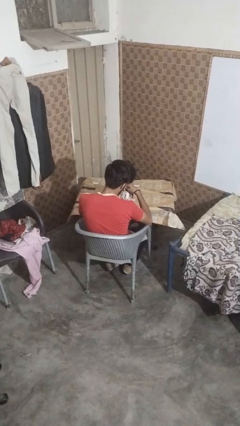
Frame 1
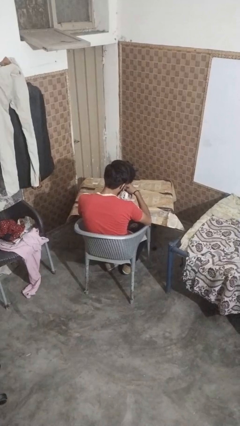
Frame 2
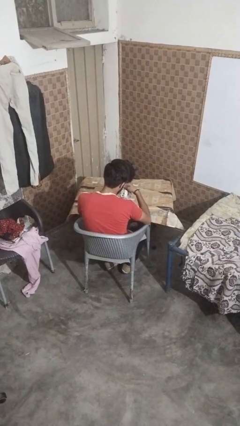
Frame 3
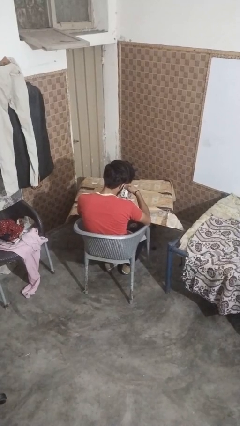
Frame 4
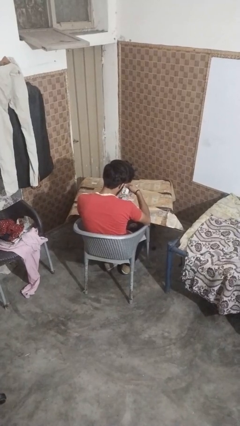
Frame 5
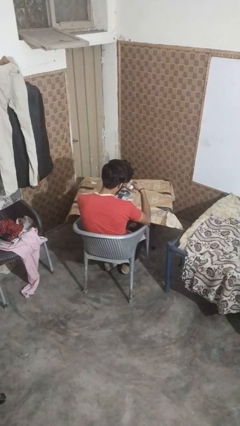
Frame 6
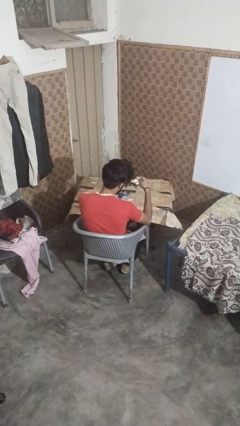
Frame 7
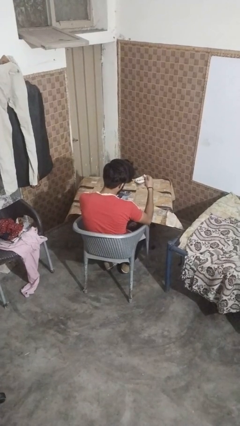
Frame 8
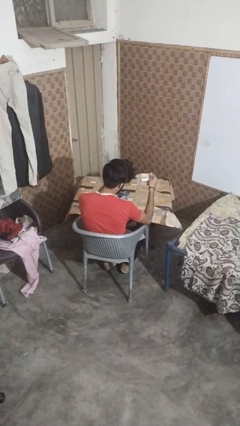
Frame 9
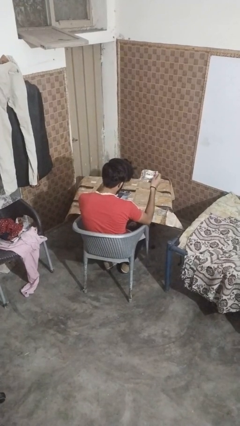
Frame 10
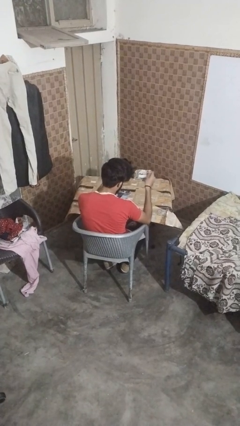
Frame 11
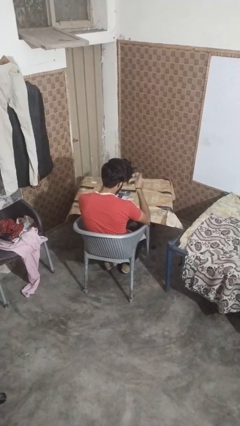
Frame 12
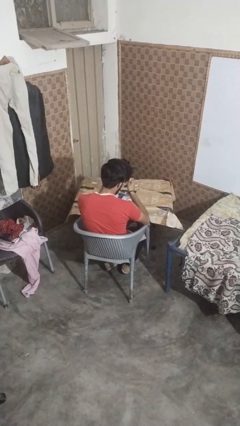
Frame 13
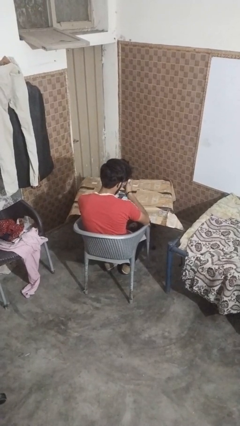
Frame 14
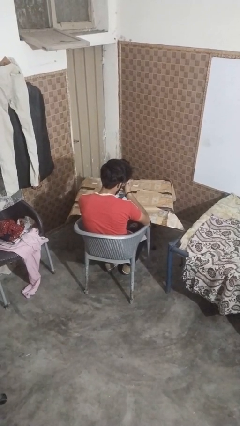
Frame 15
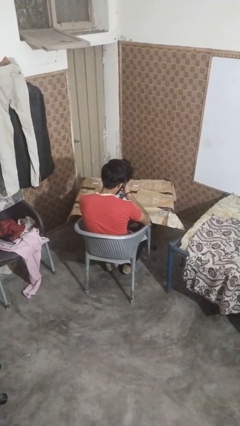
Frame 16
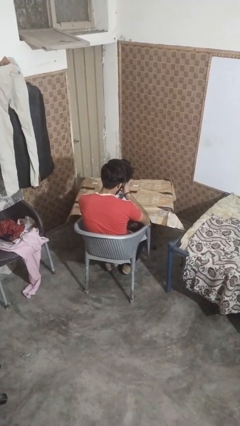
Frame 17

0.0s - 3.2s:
person tears paper

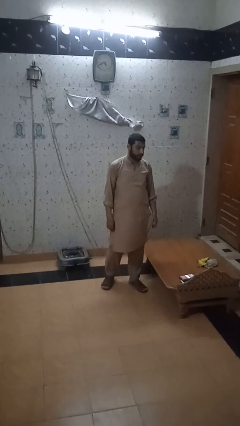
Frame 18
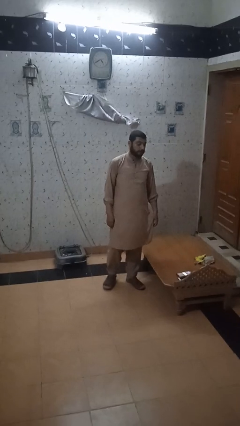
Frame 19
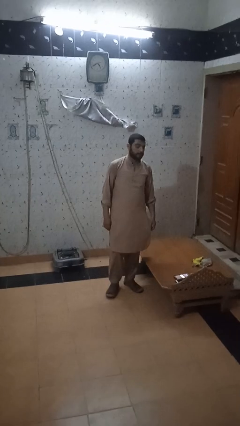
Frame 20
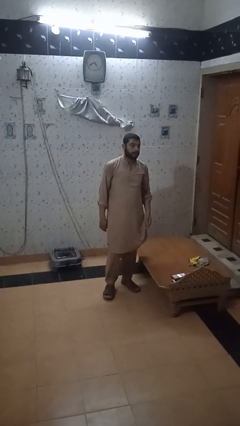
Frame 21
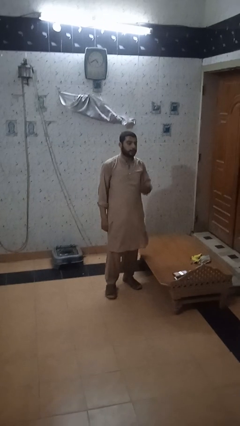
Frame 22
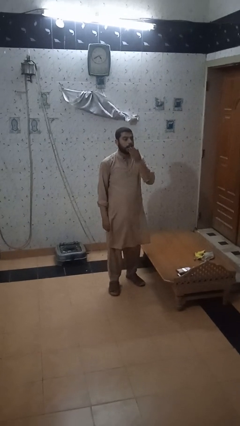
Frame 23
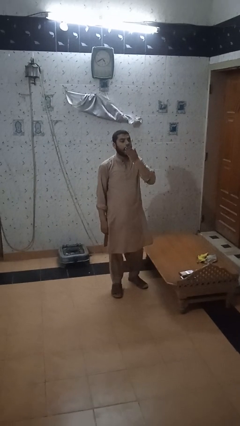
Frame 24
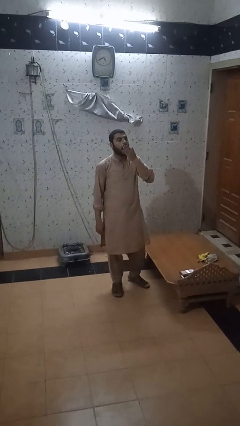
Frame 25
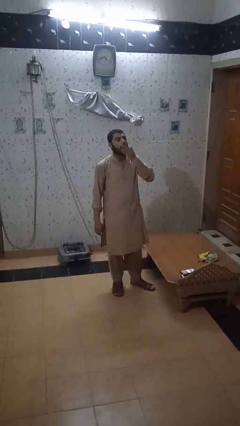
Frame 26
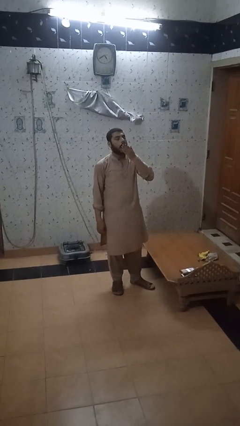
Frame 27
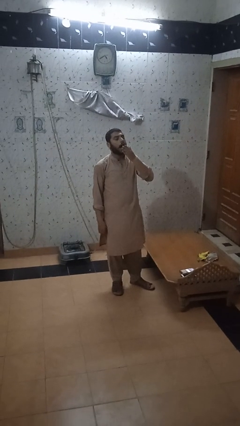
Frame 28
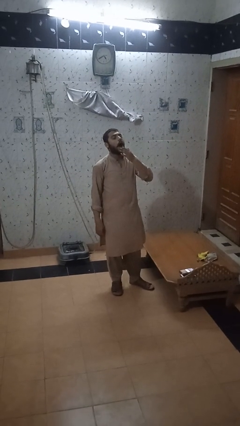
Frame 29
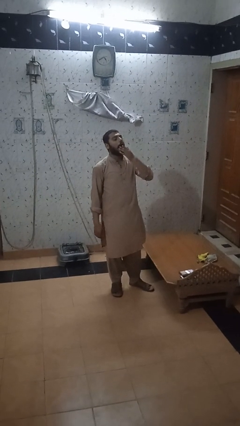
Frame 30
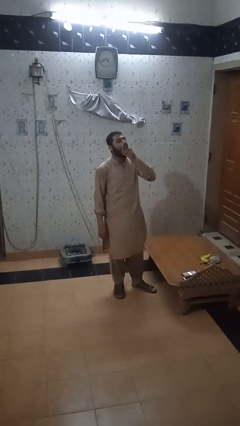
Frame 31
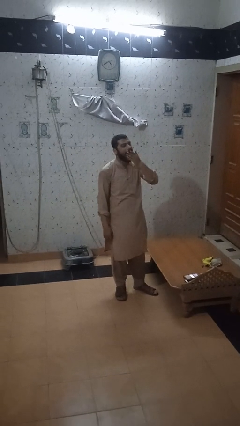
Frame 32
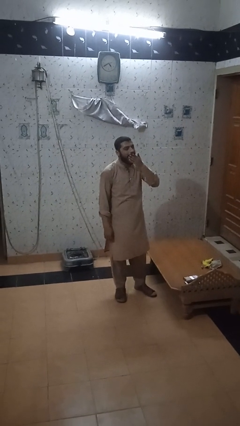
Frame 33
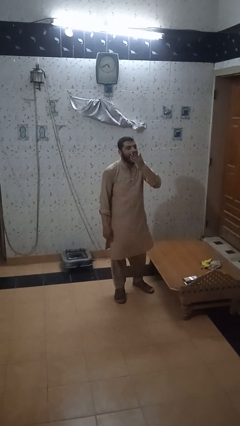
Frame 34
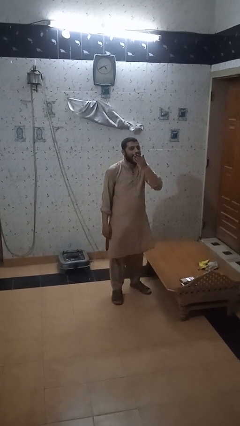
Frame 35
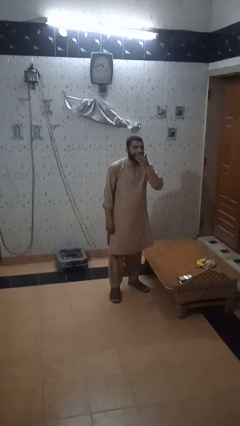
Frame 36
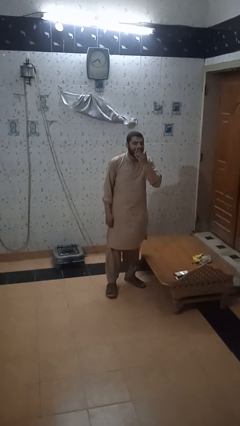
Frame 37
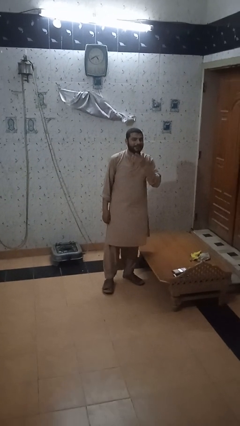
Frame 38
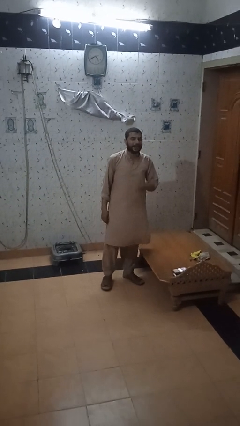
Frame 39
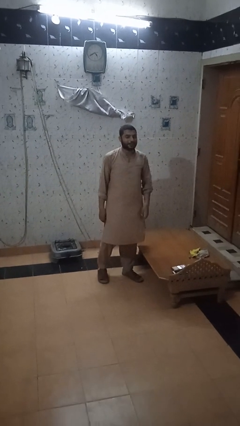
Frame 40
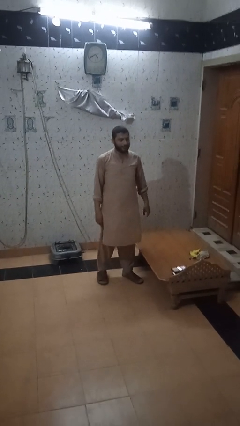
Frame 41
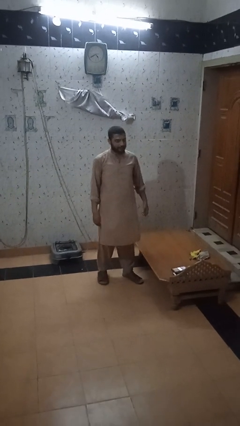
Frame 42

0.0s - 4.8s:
person yawns

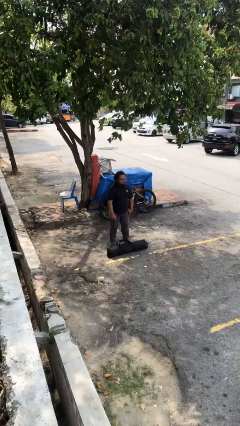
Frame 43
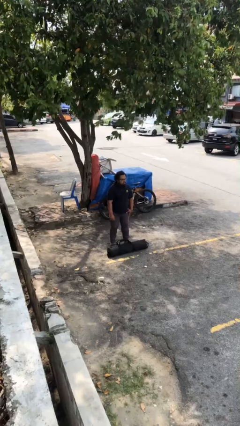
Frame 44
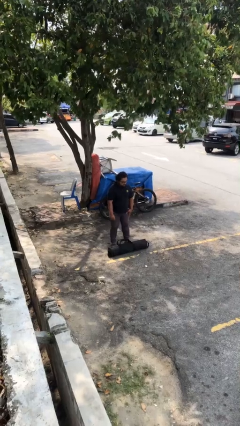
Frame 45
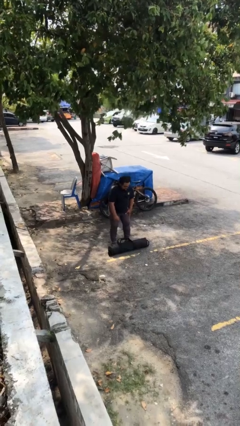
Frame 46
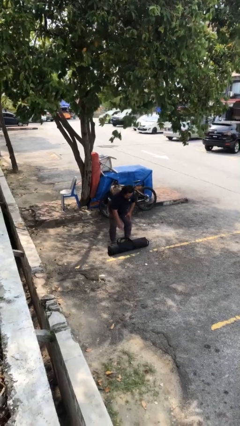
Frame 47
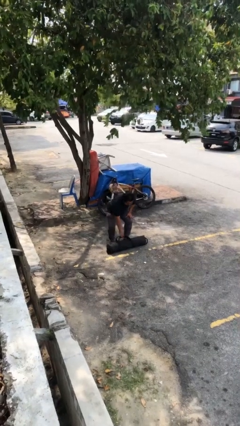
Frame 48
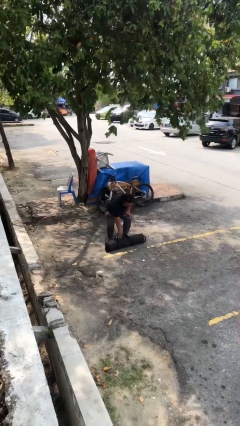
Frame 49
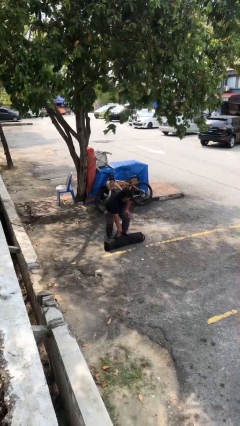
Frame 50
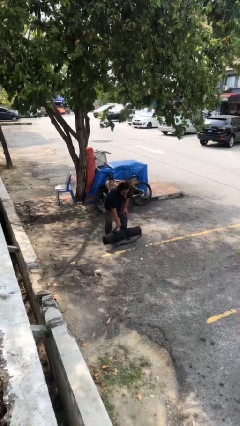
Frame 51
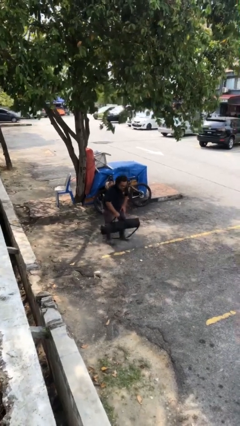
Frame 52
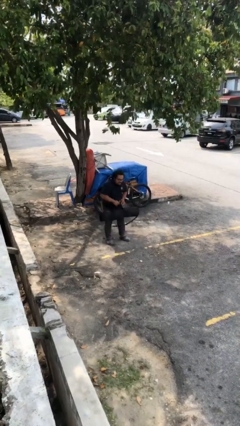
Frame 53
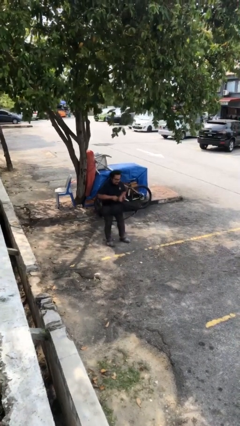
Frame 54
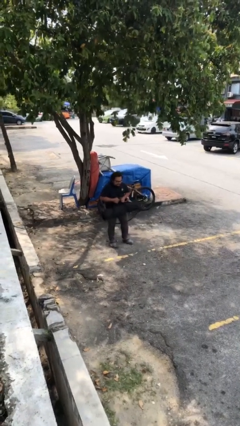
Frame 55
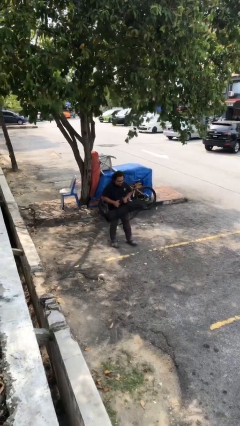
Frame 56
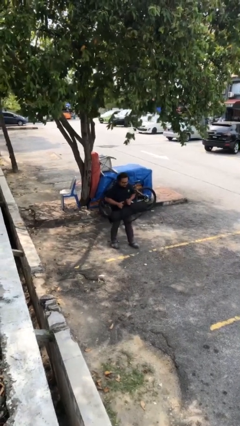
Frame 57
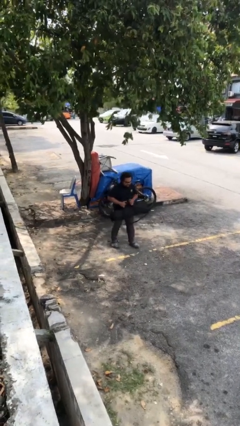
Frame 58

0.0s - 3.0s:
person picks up object from floor

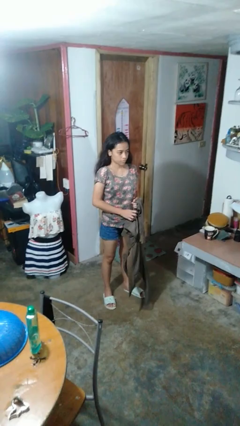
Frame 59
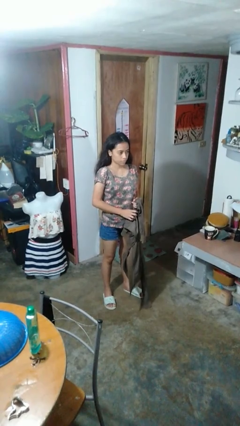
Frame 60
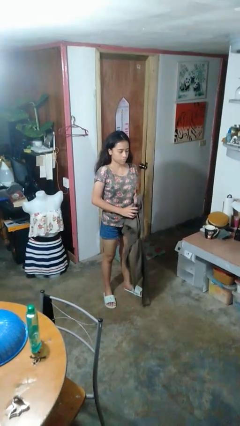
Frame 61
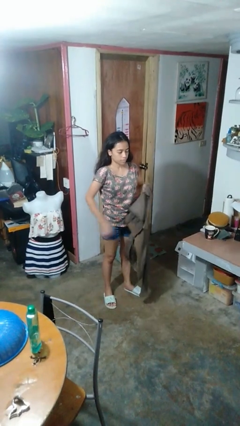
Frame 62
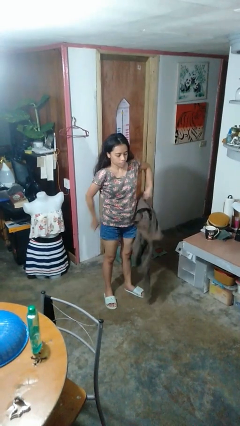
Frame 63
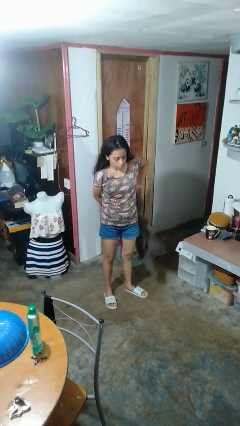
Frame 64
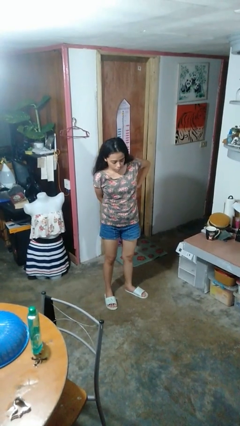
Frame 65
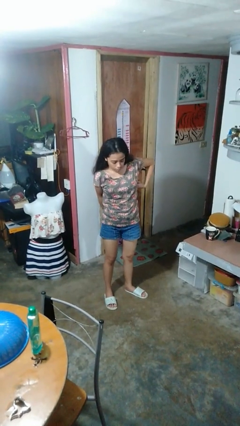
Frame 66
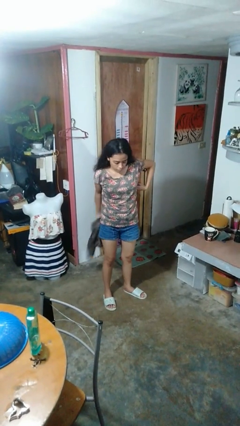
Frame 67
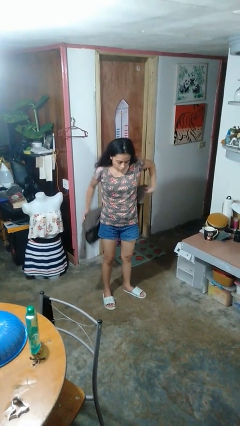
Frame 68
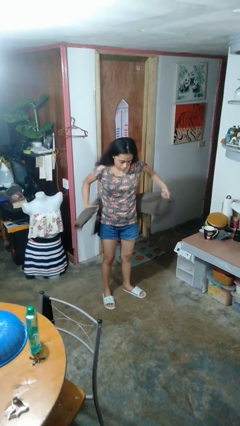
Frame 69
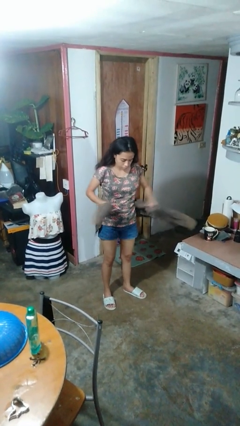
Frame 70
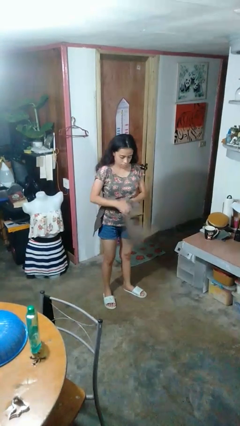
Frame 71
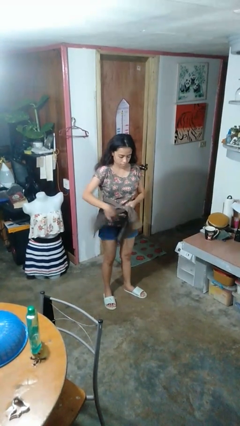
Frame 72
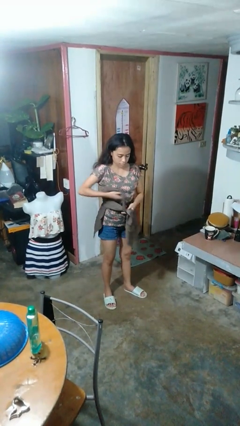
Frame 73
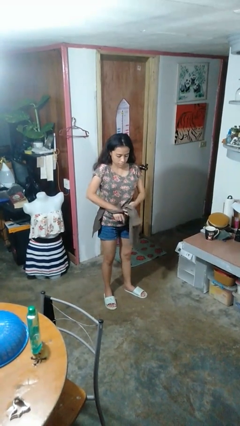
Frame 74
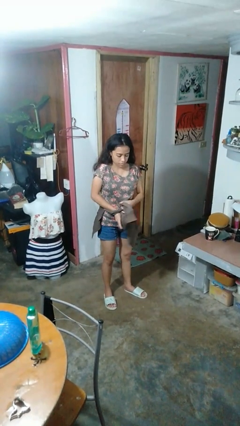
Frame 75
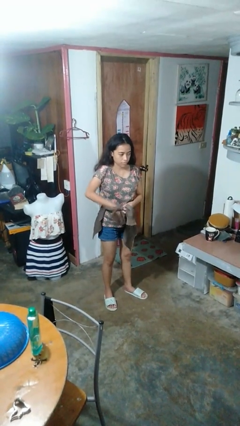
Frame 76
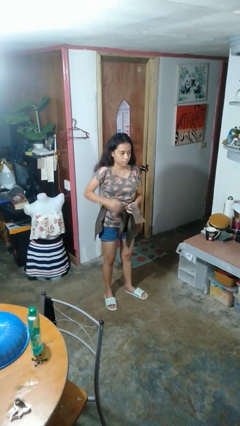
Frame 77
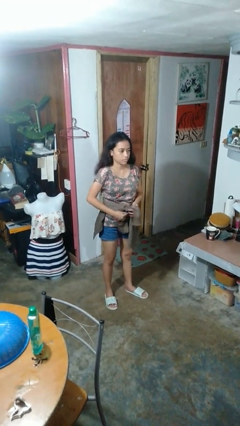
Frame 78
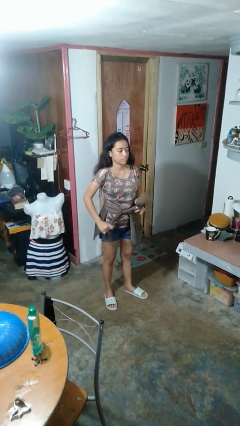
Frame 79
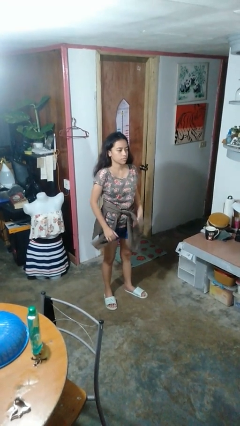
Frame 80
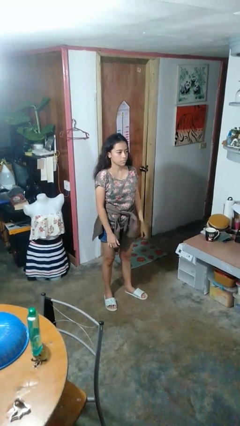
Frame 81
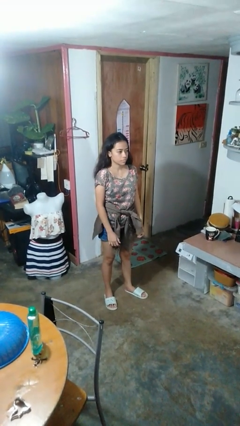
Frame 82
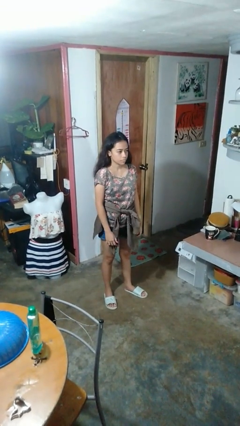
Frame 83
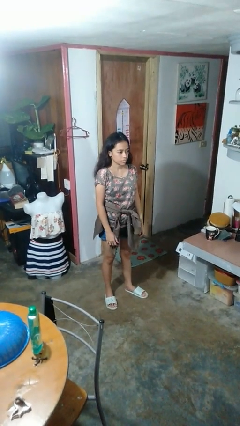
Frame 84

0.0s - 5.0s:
person ties jacket around waist

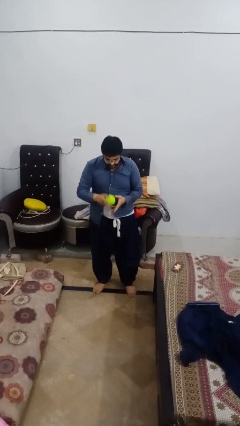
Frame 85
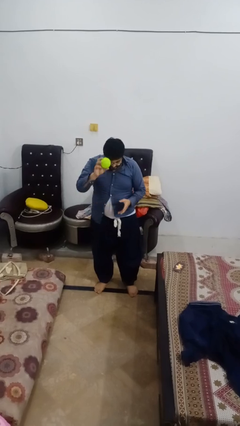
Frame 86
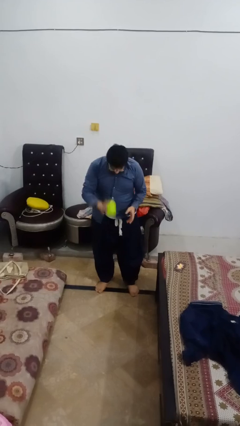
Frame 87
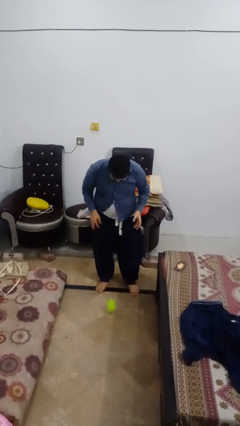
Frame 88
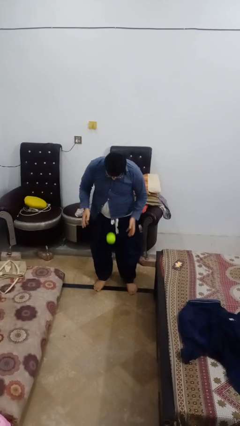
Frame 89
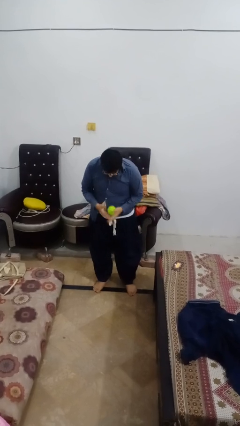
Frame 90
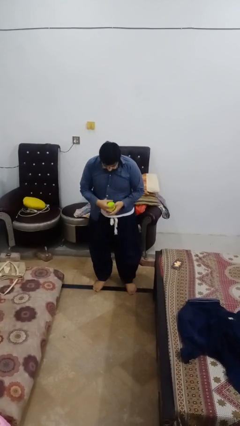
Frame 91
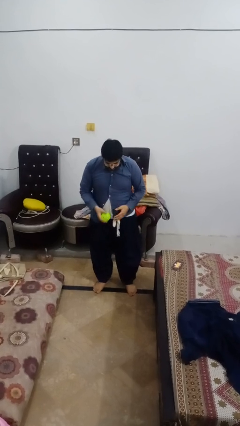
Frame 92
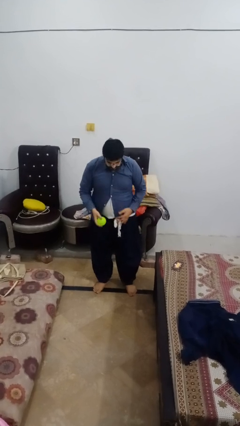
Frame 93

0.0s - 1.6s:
person bounces ball on floor
